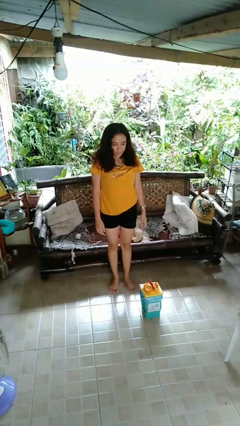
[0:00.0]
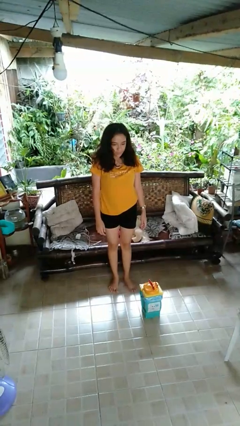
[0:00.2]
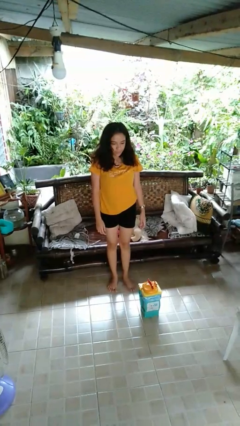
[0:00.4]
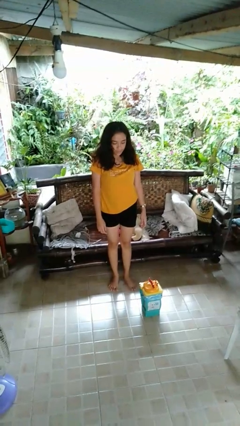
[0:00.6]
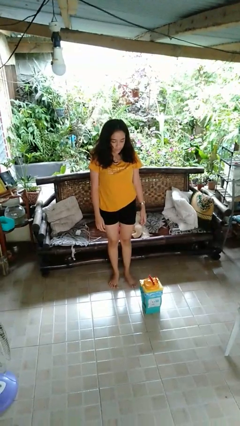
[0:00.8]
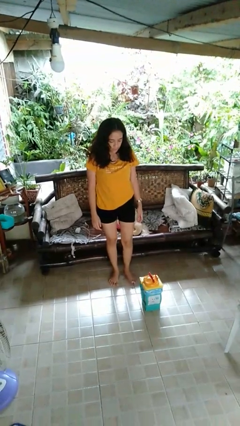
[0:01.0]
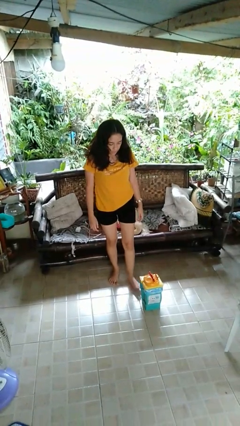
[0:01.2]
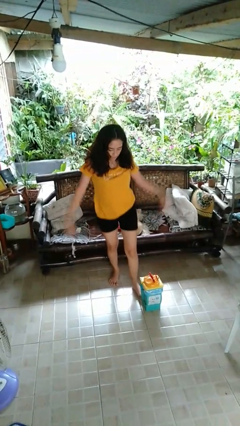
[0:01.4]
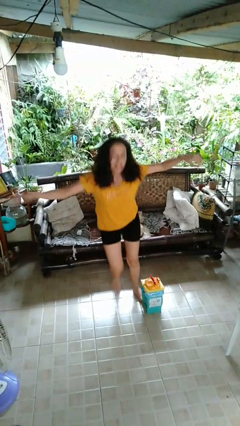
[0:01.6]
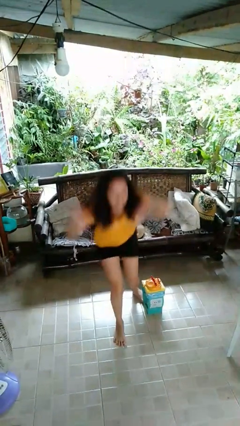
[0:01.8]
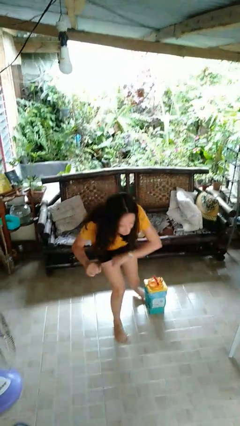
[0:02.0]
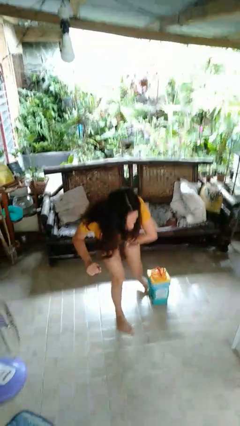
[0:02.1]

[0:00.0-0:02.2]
person trips on object on floor

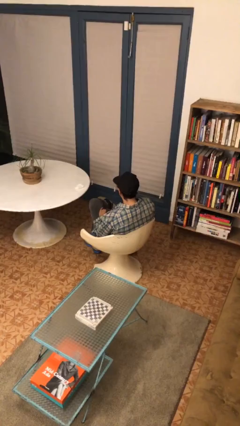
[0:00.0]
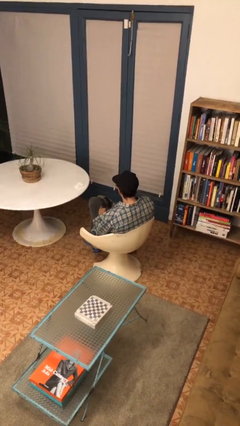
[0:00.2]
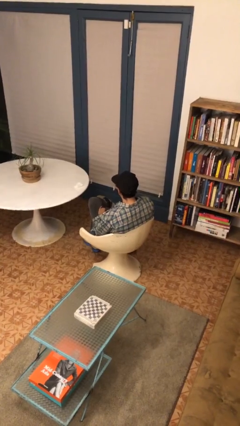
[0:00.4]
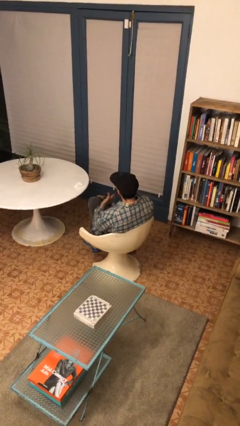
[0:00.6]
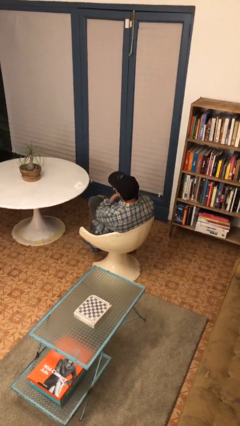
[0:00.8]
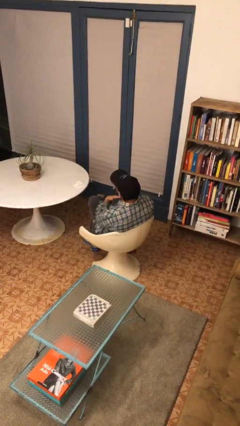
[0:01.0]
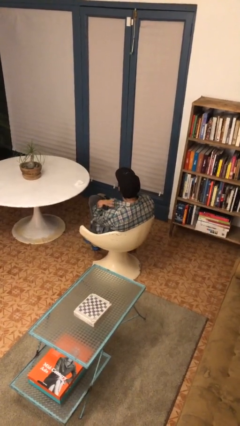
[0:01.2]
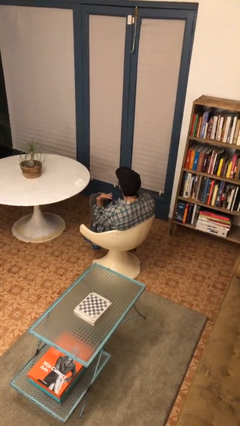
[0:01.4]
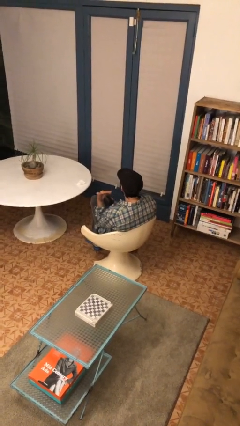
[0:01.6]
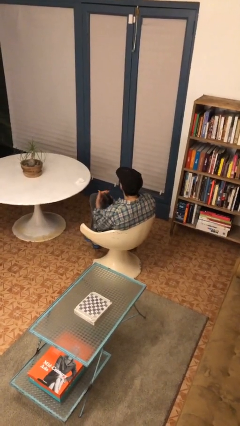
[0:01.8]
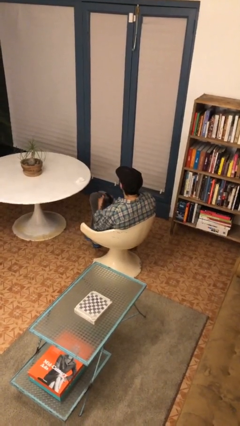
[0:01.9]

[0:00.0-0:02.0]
person gestures cut

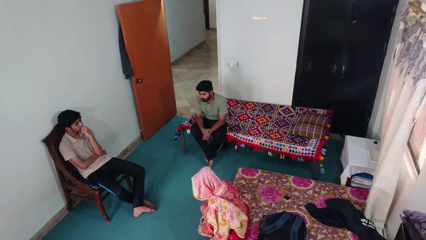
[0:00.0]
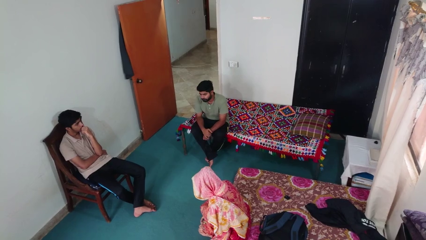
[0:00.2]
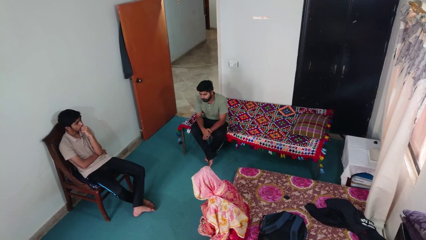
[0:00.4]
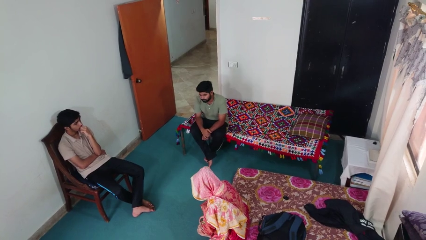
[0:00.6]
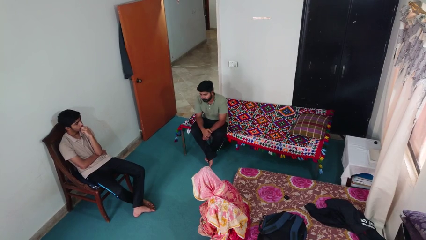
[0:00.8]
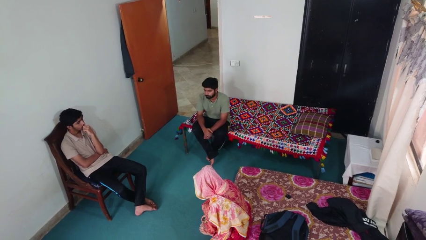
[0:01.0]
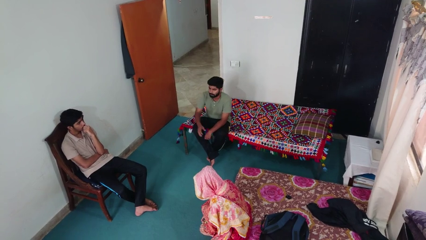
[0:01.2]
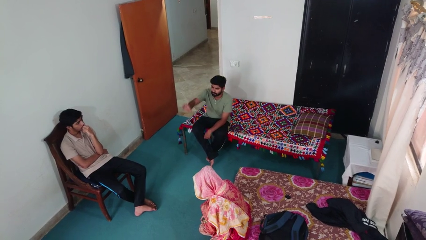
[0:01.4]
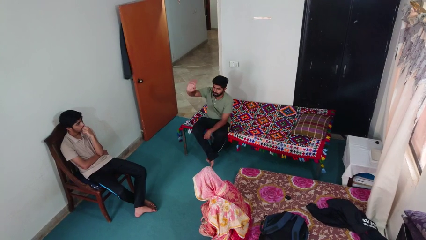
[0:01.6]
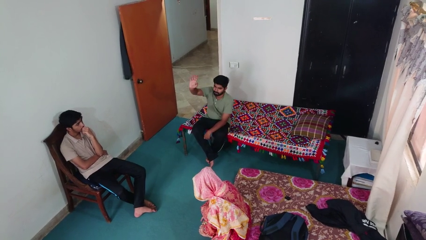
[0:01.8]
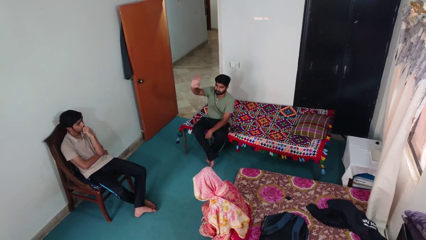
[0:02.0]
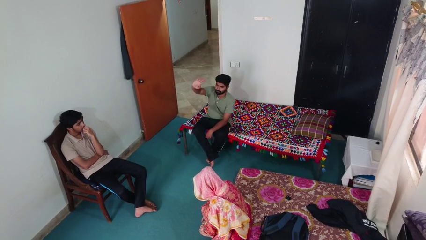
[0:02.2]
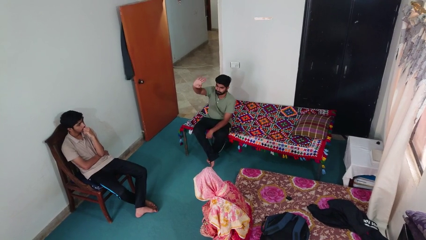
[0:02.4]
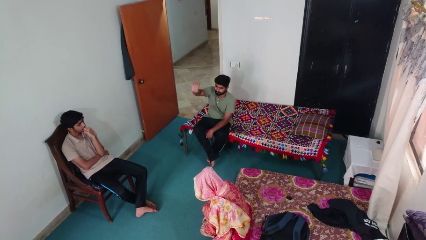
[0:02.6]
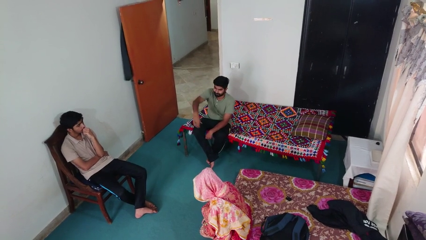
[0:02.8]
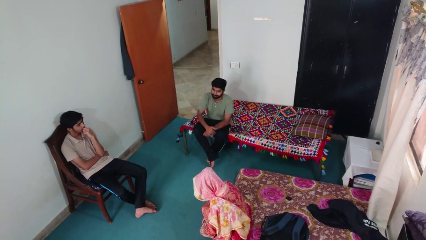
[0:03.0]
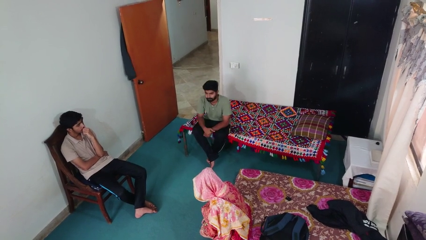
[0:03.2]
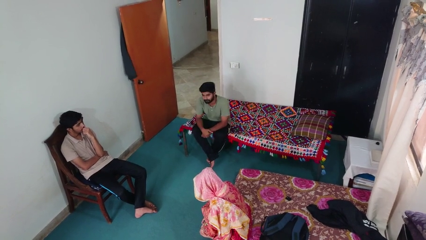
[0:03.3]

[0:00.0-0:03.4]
person waves at person

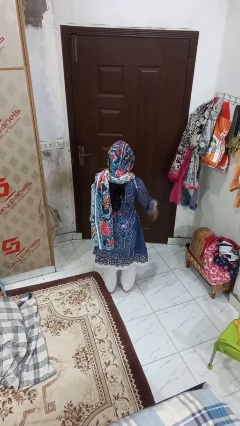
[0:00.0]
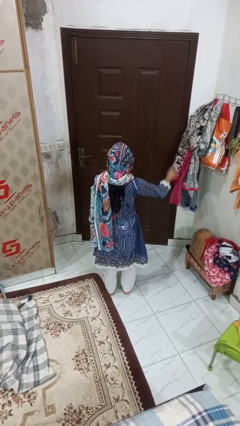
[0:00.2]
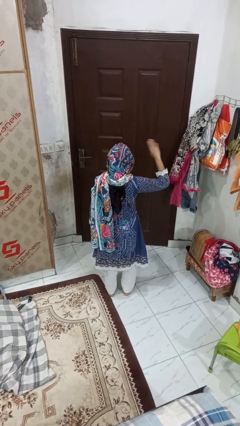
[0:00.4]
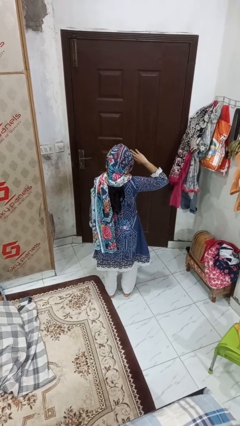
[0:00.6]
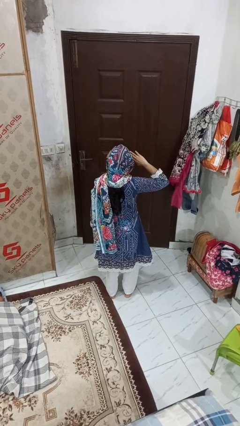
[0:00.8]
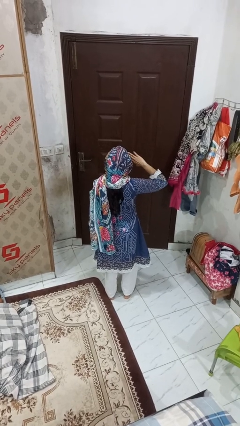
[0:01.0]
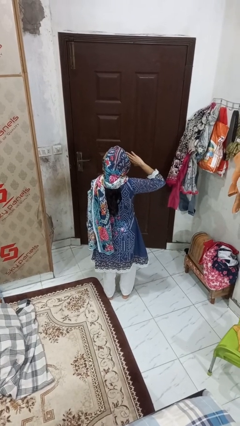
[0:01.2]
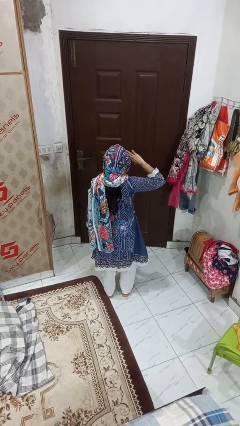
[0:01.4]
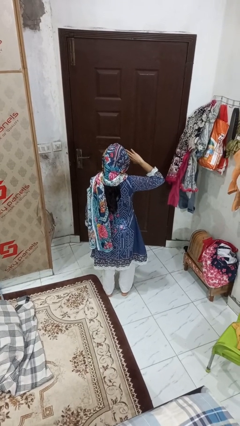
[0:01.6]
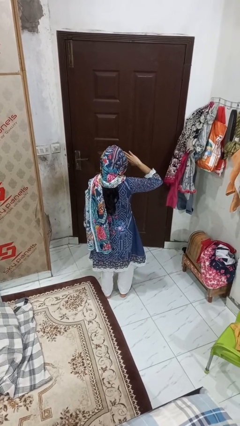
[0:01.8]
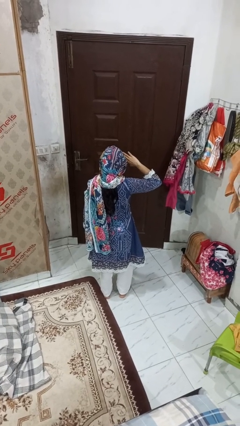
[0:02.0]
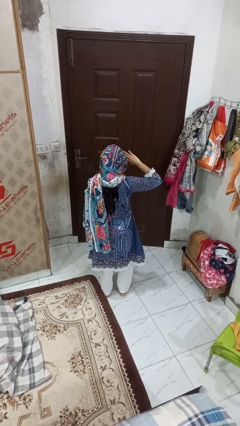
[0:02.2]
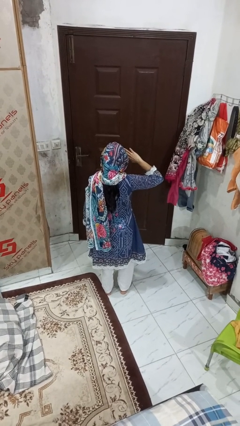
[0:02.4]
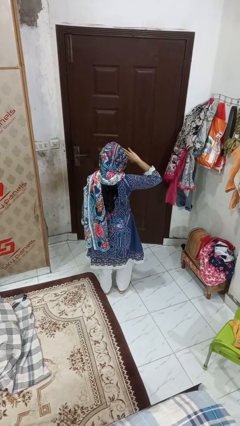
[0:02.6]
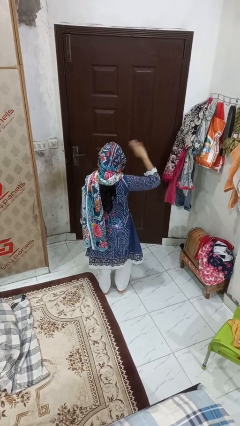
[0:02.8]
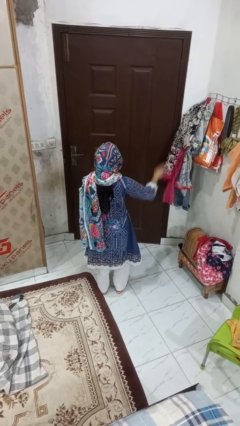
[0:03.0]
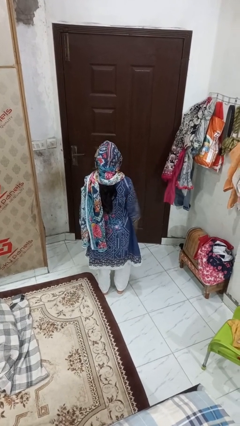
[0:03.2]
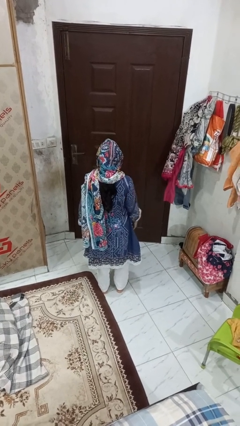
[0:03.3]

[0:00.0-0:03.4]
person salutes

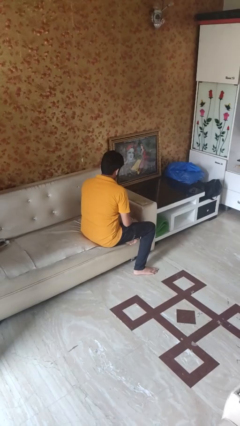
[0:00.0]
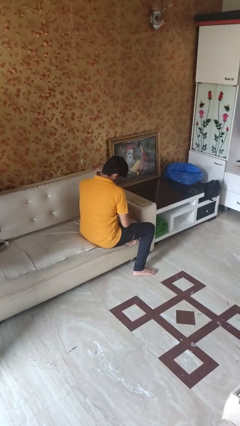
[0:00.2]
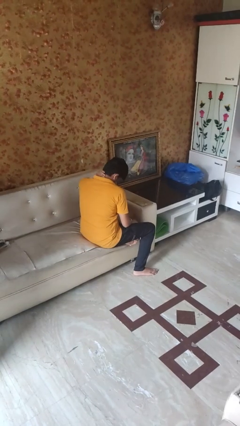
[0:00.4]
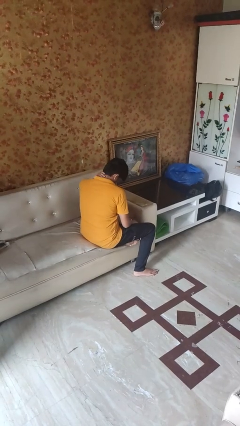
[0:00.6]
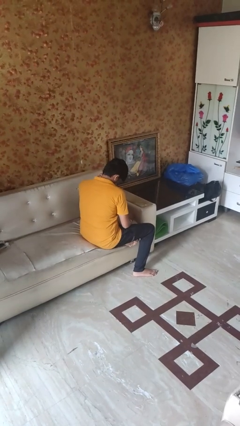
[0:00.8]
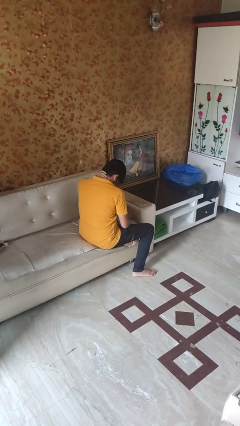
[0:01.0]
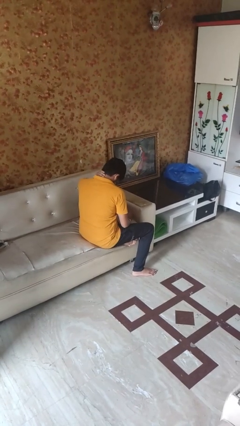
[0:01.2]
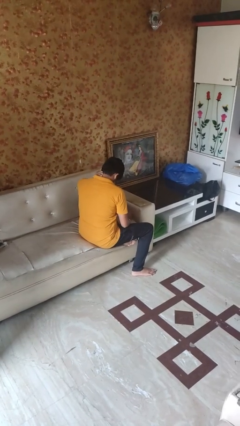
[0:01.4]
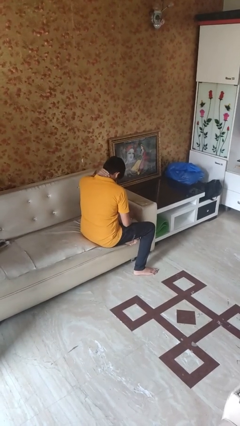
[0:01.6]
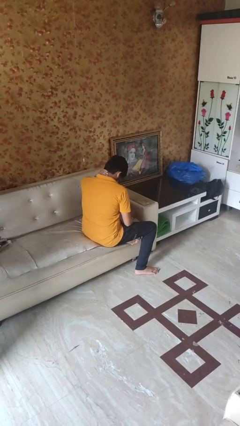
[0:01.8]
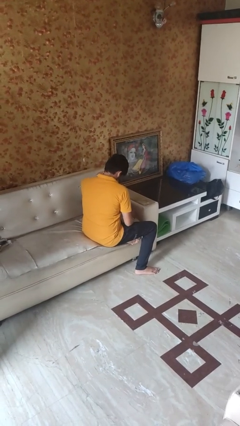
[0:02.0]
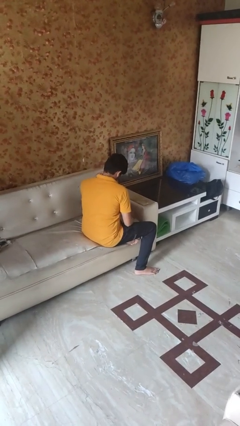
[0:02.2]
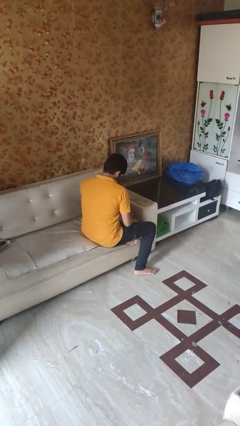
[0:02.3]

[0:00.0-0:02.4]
person rubs neck

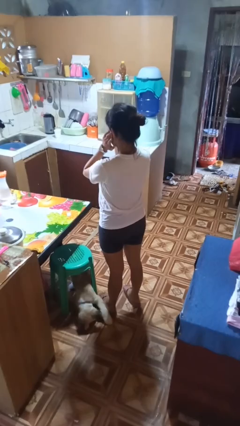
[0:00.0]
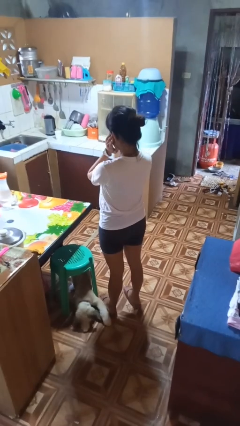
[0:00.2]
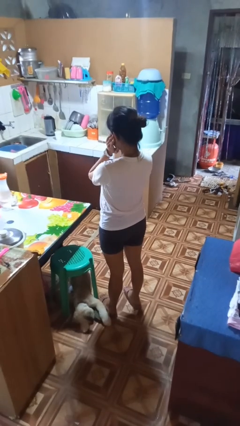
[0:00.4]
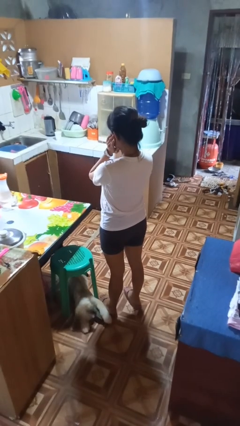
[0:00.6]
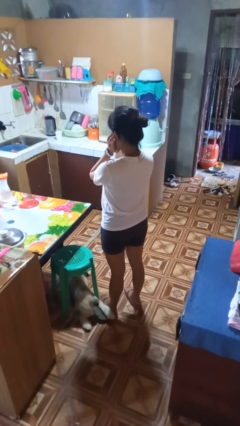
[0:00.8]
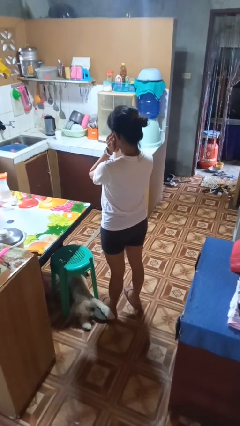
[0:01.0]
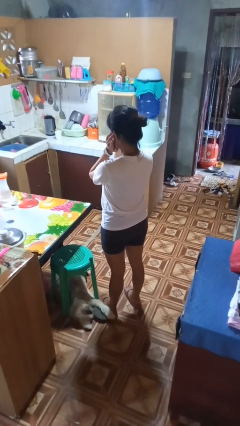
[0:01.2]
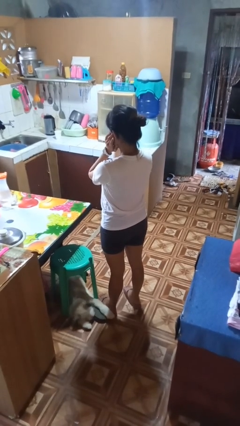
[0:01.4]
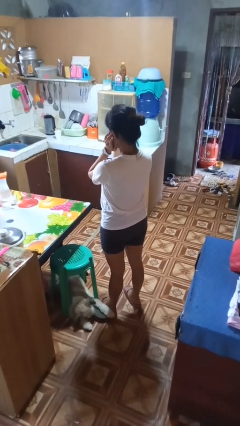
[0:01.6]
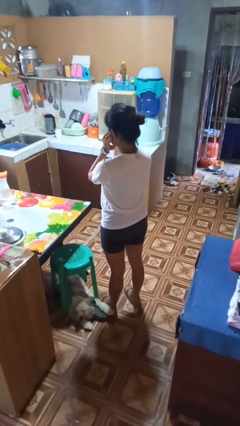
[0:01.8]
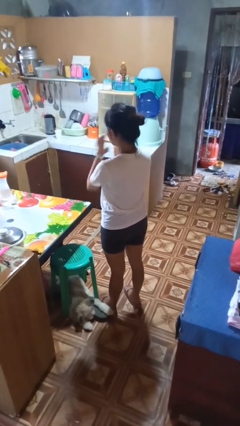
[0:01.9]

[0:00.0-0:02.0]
person puts fingers in ear

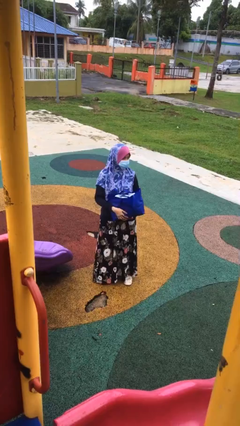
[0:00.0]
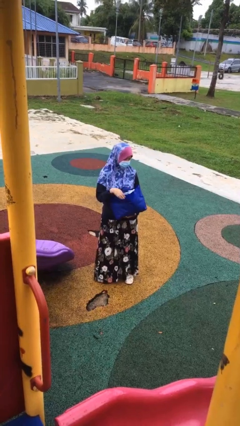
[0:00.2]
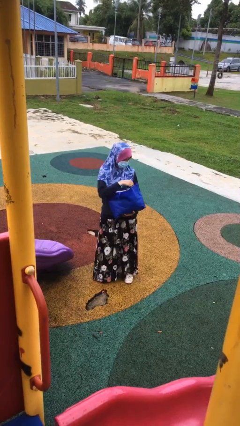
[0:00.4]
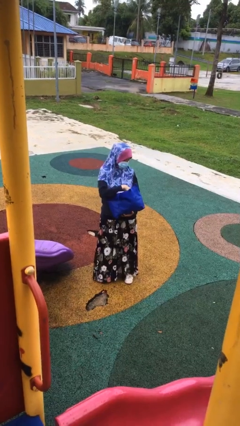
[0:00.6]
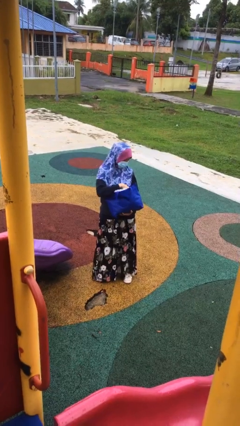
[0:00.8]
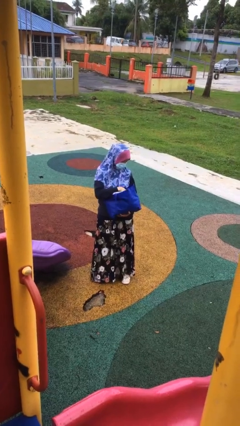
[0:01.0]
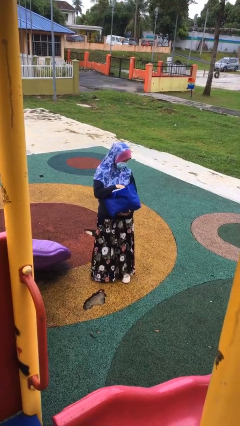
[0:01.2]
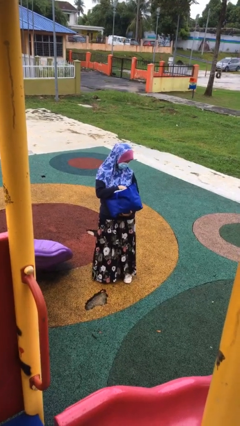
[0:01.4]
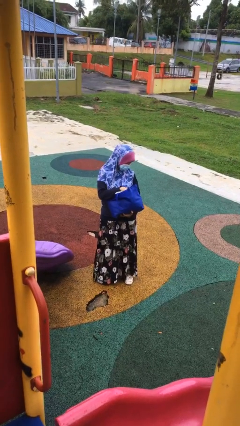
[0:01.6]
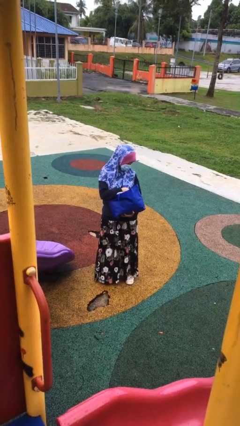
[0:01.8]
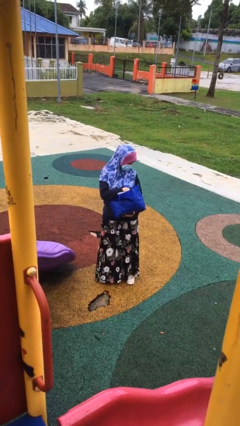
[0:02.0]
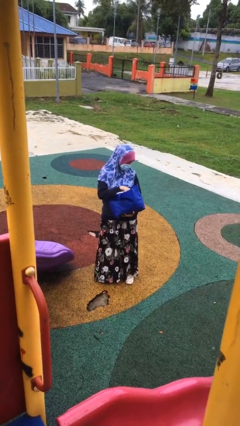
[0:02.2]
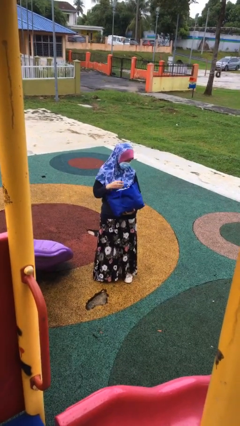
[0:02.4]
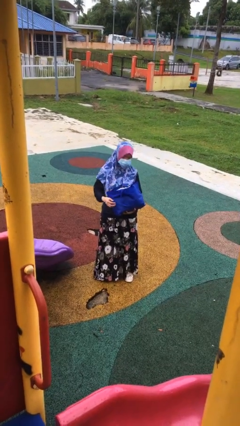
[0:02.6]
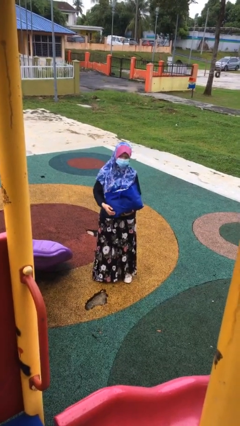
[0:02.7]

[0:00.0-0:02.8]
person searches in bag
